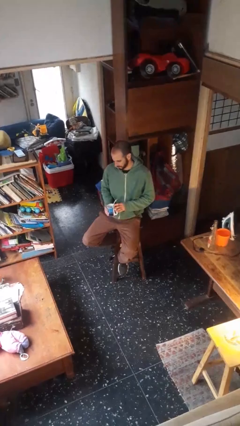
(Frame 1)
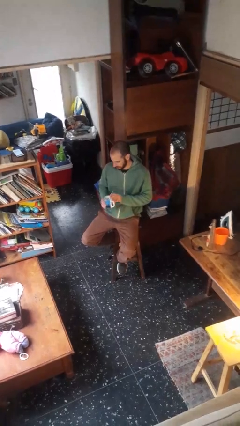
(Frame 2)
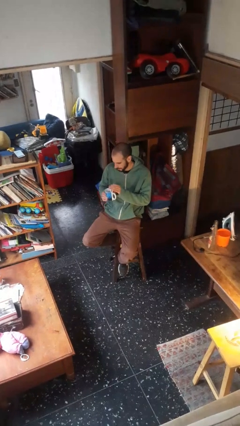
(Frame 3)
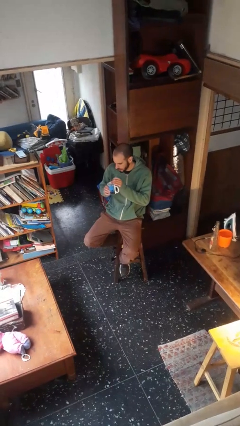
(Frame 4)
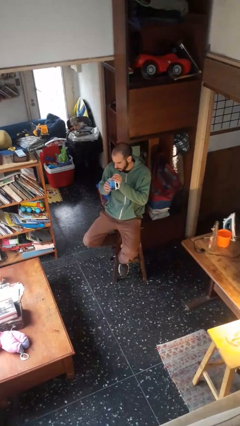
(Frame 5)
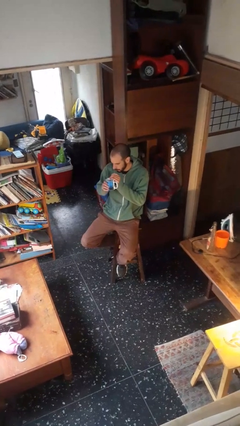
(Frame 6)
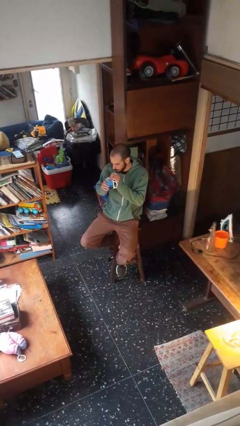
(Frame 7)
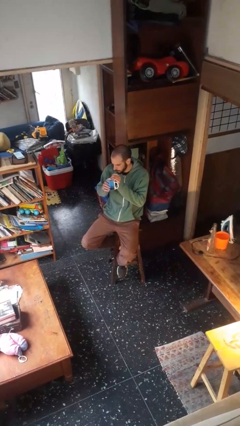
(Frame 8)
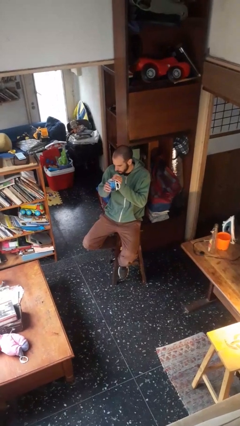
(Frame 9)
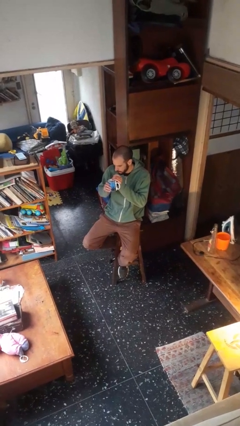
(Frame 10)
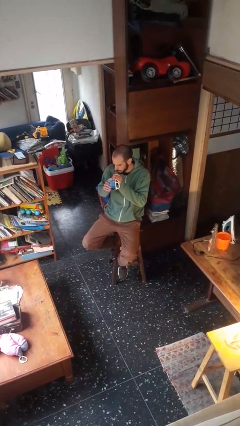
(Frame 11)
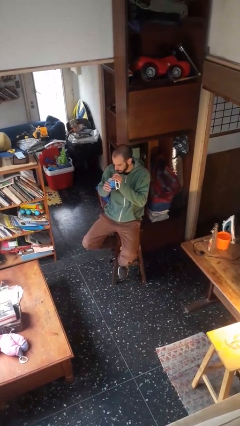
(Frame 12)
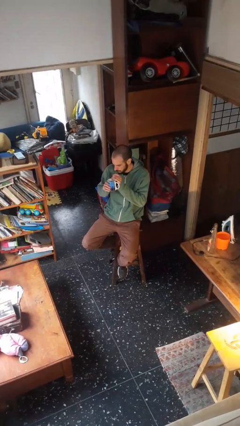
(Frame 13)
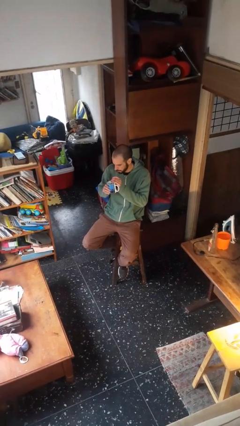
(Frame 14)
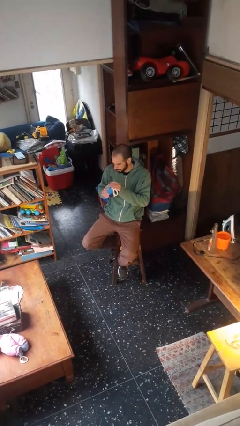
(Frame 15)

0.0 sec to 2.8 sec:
person drinks from straw

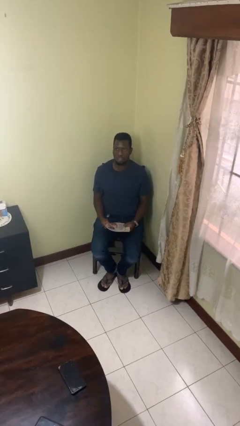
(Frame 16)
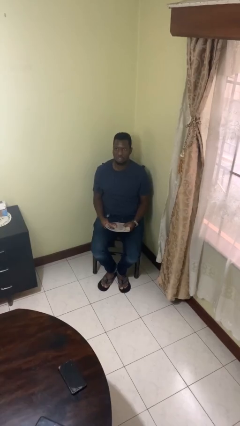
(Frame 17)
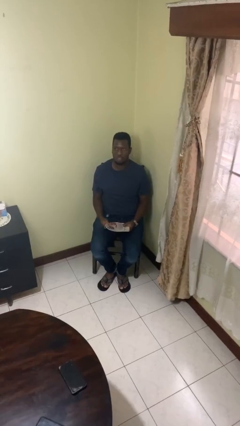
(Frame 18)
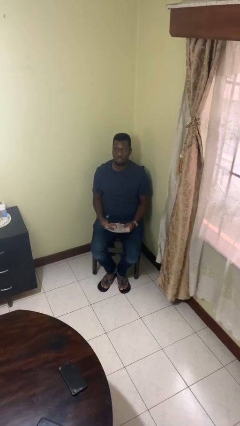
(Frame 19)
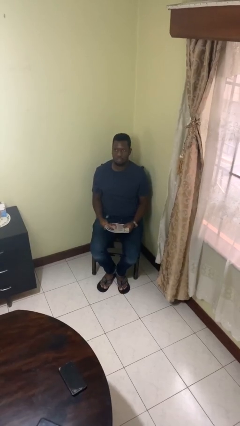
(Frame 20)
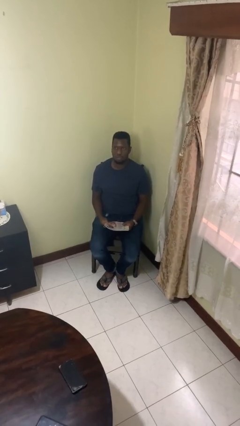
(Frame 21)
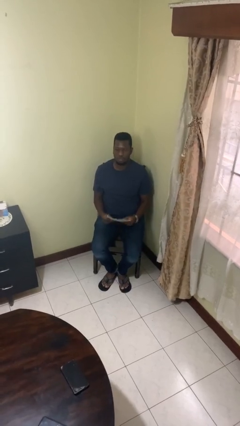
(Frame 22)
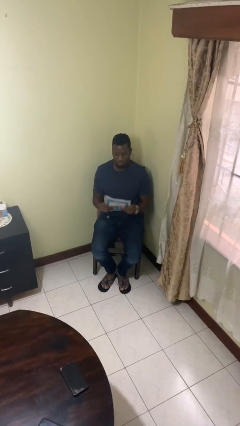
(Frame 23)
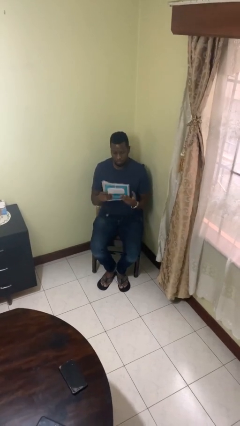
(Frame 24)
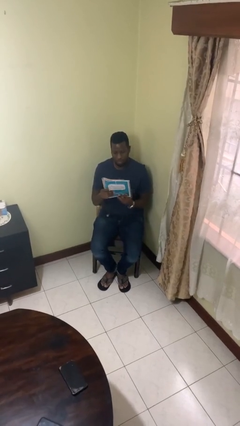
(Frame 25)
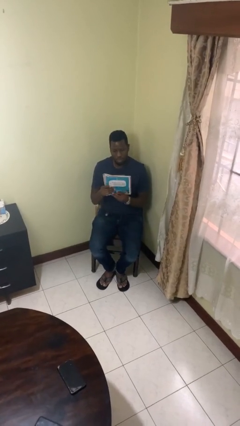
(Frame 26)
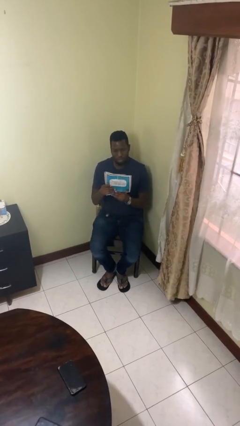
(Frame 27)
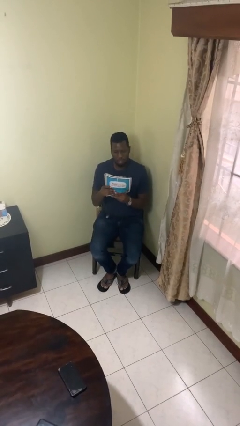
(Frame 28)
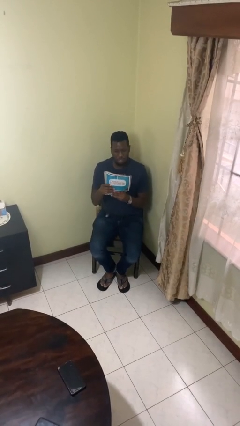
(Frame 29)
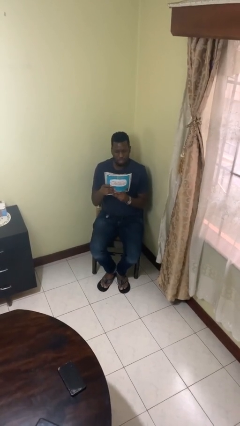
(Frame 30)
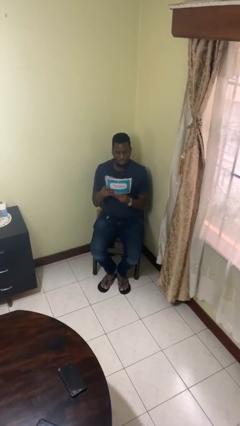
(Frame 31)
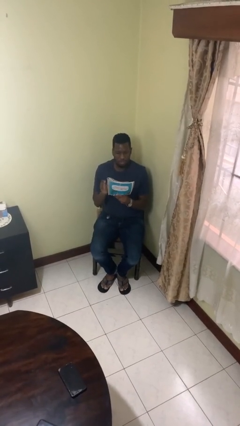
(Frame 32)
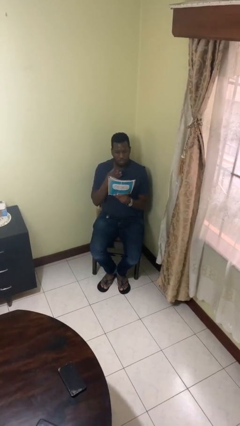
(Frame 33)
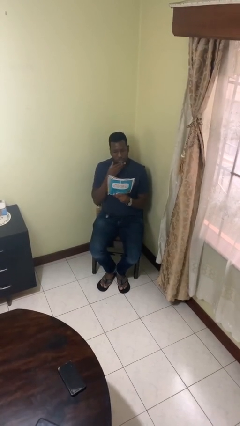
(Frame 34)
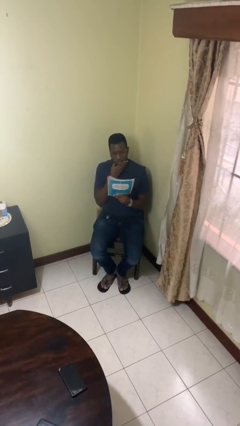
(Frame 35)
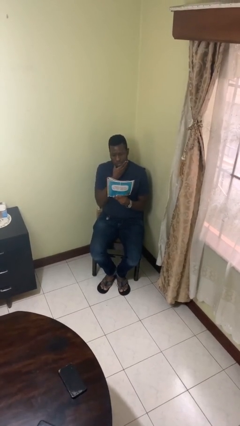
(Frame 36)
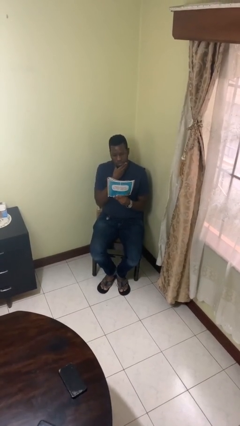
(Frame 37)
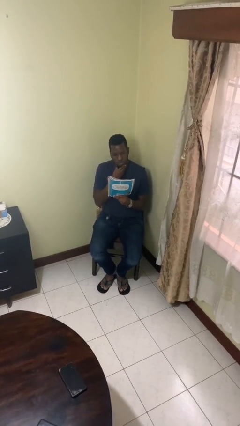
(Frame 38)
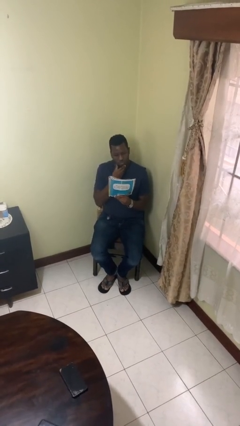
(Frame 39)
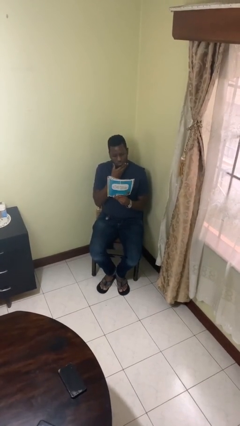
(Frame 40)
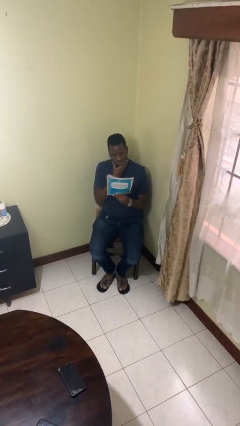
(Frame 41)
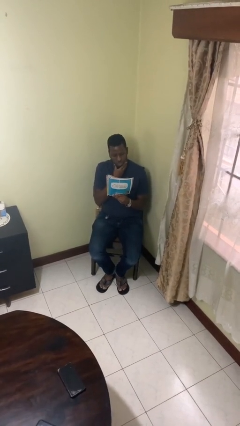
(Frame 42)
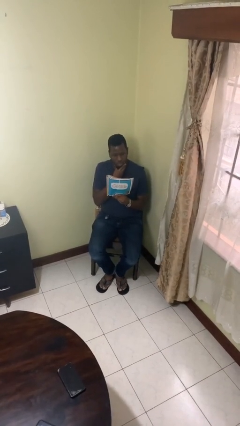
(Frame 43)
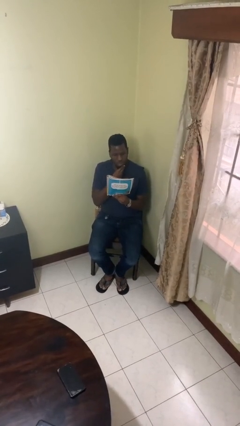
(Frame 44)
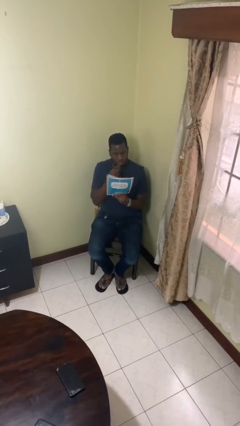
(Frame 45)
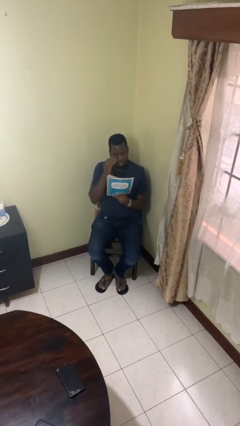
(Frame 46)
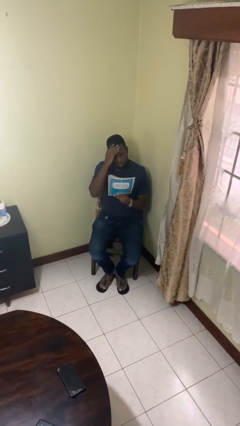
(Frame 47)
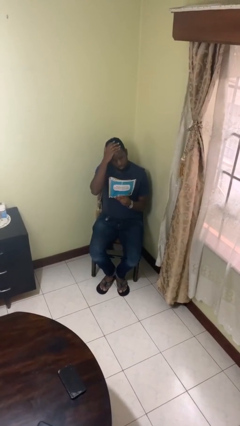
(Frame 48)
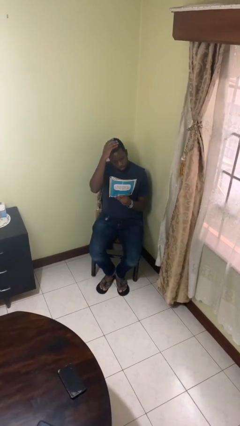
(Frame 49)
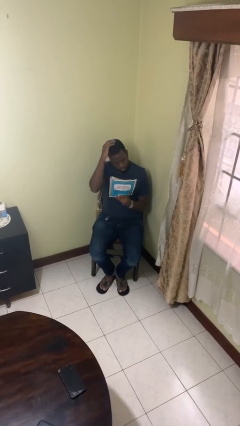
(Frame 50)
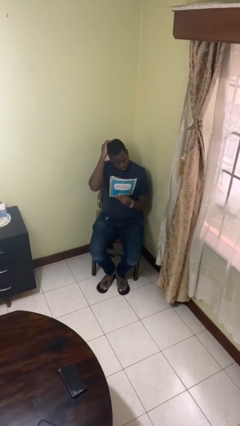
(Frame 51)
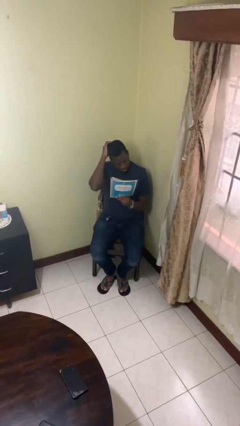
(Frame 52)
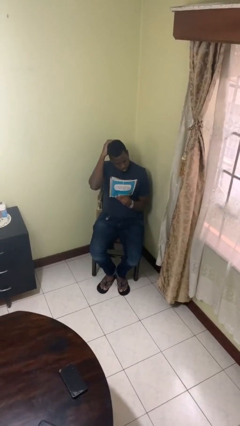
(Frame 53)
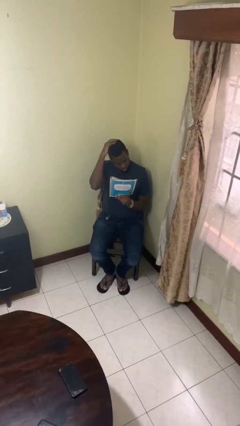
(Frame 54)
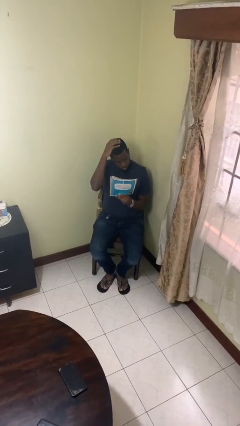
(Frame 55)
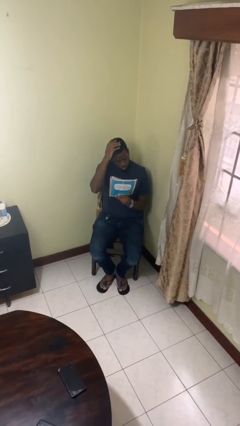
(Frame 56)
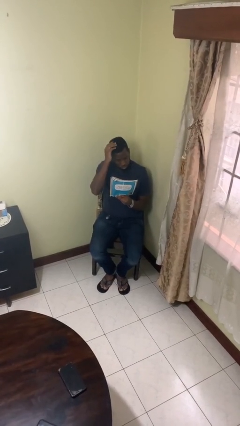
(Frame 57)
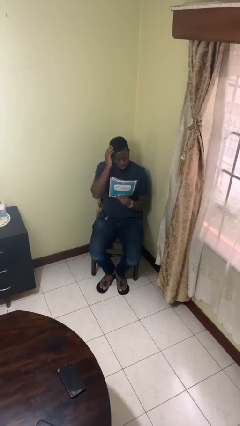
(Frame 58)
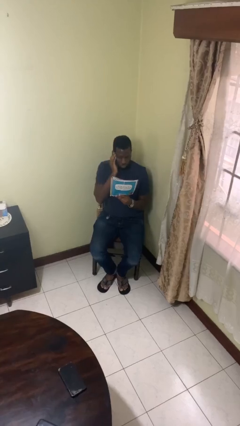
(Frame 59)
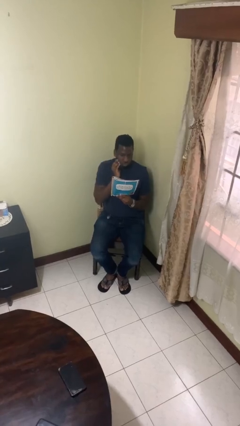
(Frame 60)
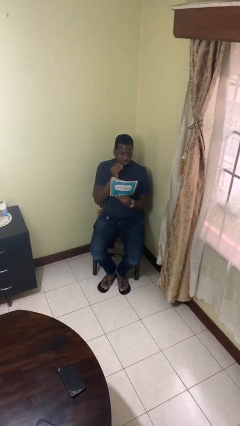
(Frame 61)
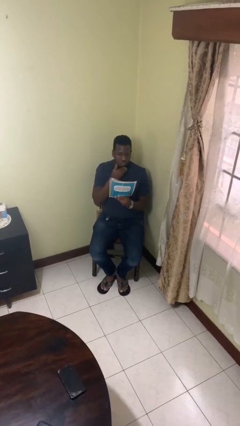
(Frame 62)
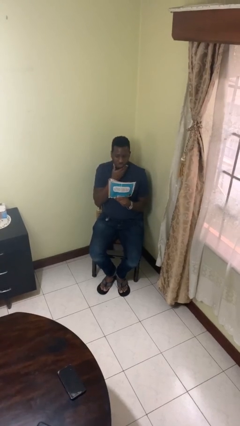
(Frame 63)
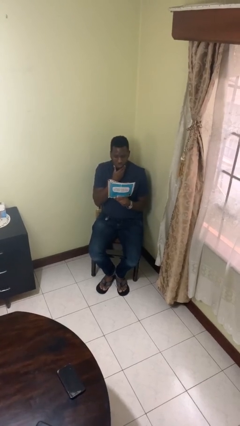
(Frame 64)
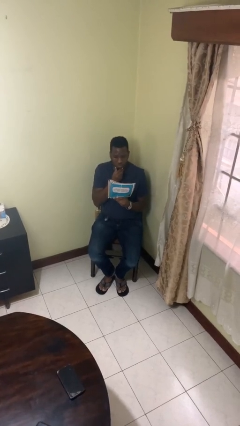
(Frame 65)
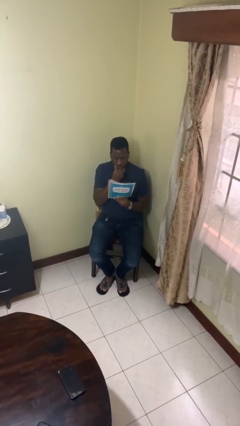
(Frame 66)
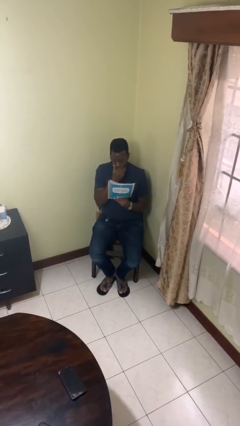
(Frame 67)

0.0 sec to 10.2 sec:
person reads document

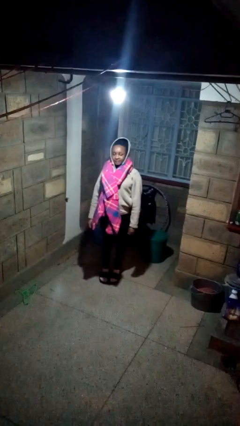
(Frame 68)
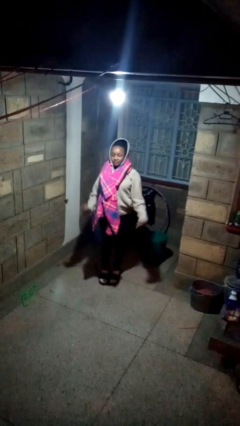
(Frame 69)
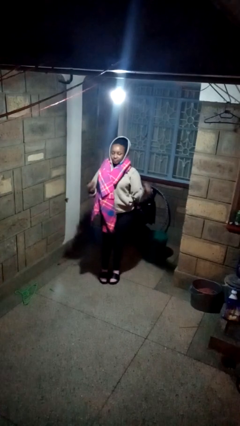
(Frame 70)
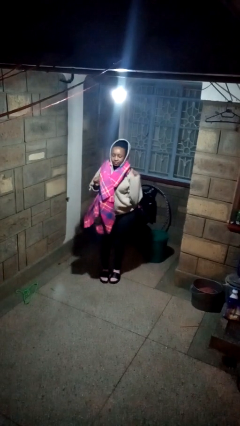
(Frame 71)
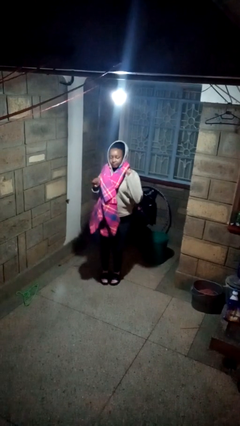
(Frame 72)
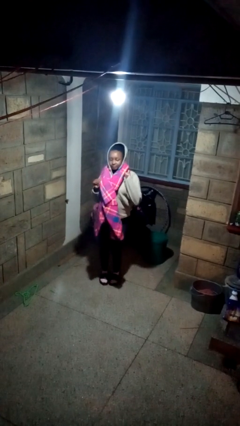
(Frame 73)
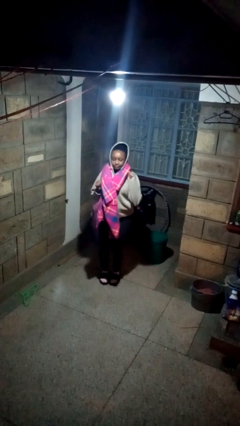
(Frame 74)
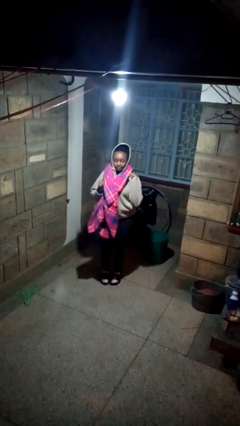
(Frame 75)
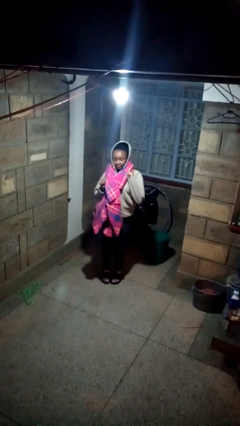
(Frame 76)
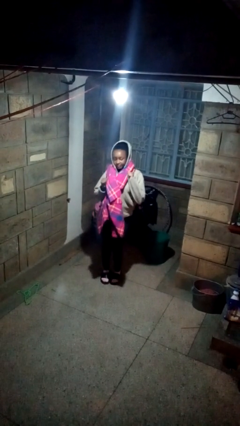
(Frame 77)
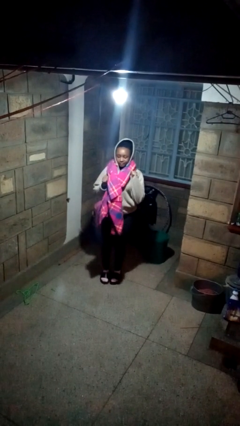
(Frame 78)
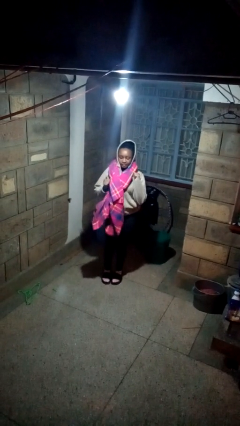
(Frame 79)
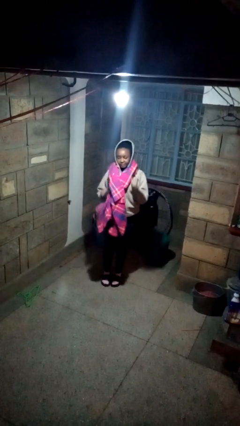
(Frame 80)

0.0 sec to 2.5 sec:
person wiggles hips

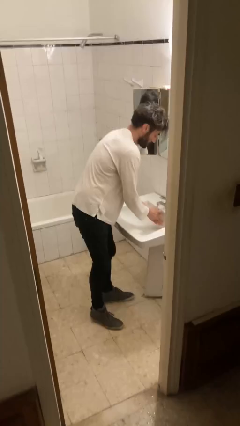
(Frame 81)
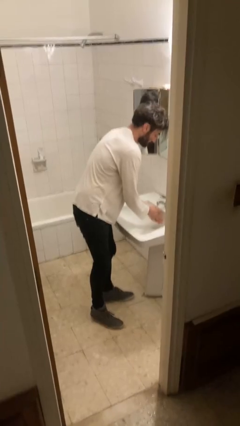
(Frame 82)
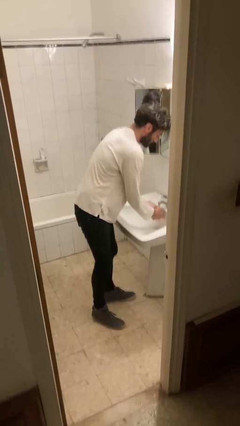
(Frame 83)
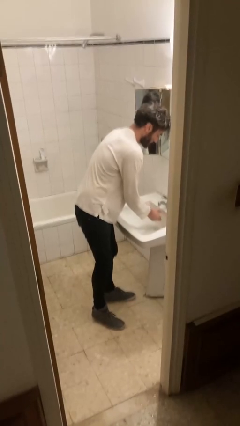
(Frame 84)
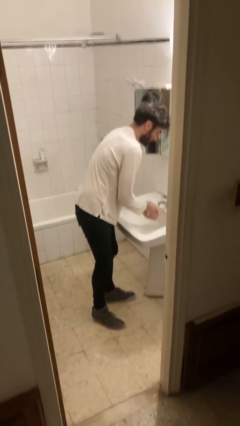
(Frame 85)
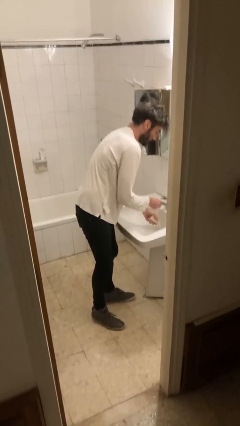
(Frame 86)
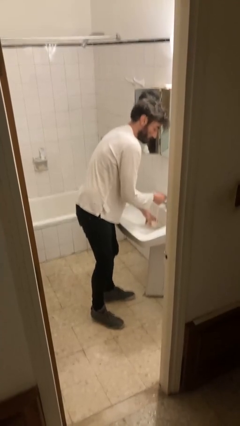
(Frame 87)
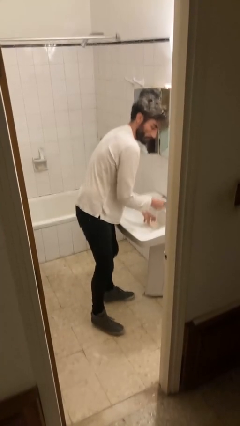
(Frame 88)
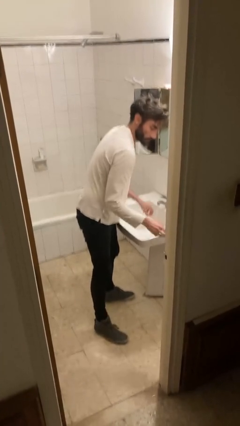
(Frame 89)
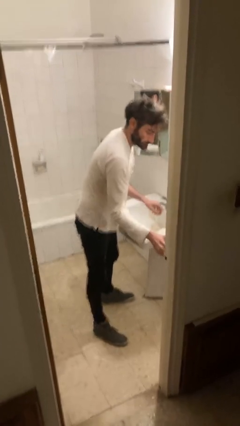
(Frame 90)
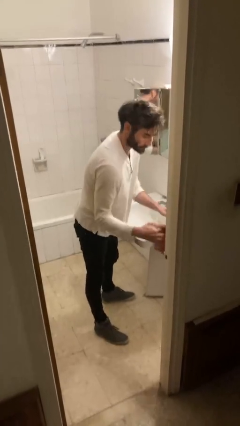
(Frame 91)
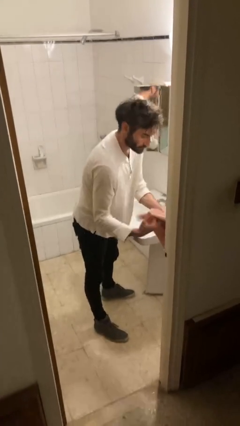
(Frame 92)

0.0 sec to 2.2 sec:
person washes hands
